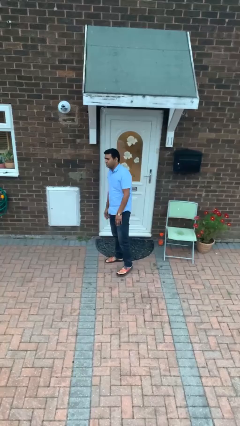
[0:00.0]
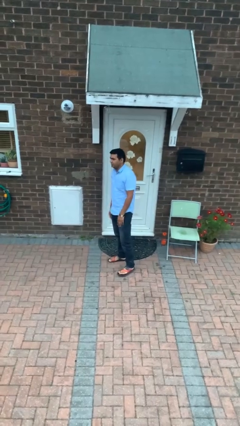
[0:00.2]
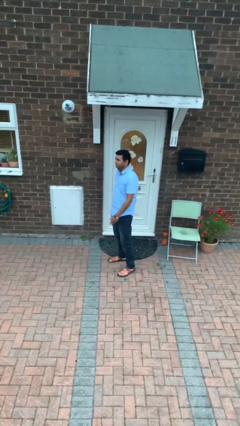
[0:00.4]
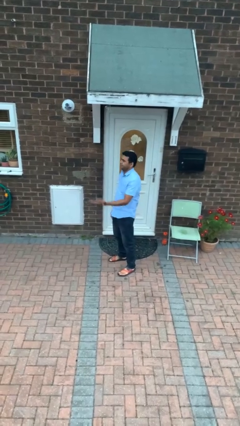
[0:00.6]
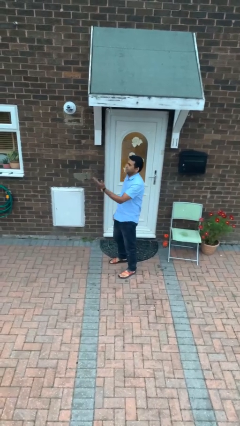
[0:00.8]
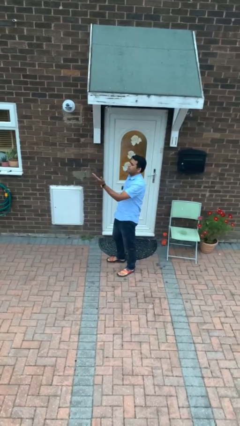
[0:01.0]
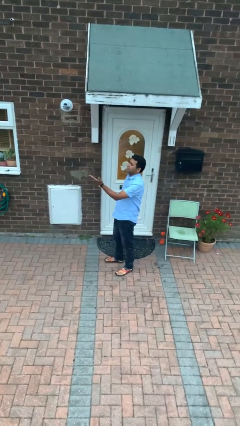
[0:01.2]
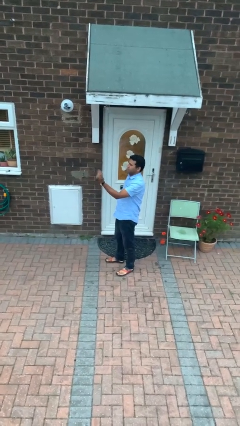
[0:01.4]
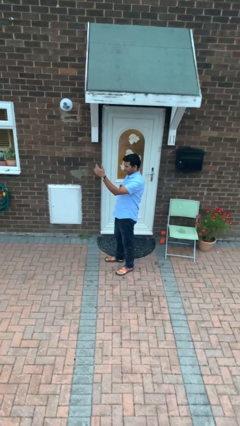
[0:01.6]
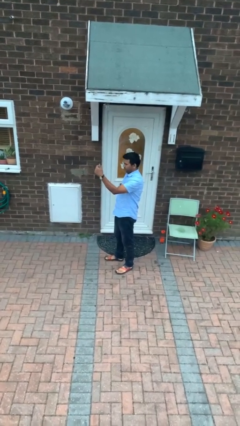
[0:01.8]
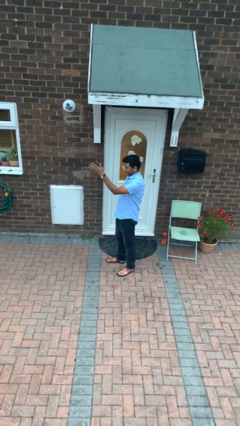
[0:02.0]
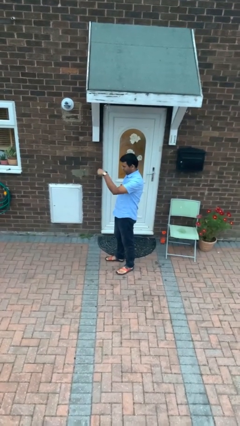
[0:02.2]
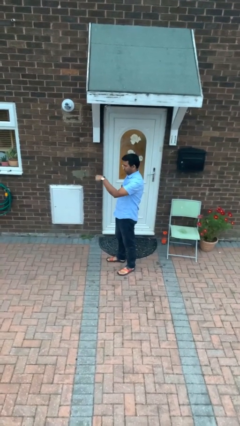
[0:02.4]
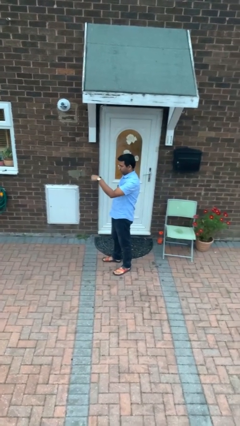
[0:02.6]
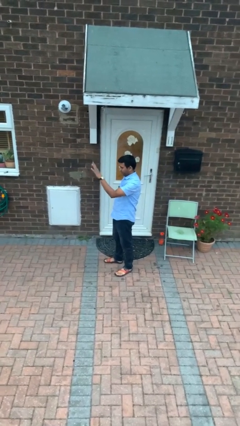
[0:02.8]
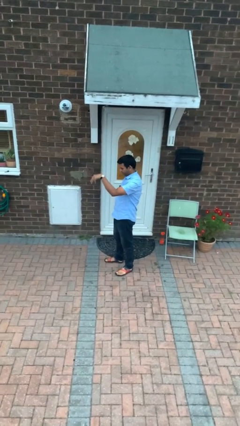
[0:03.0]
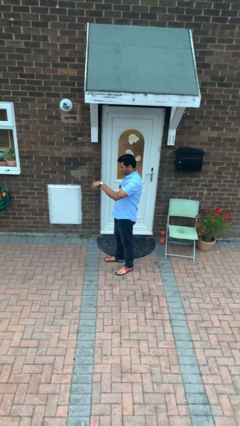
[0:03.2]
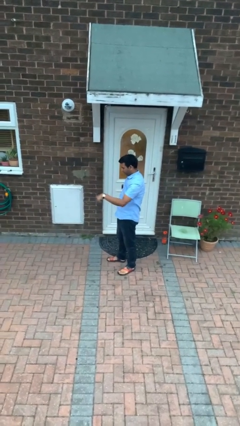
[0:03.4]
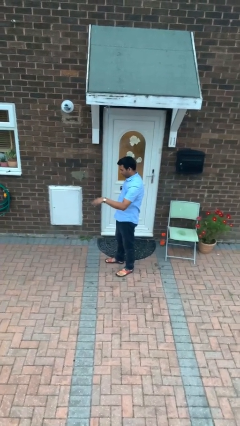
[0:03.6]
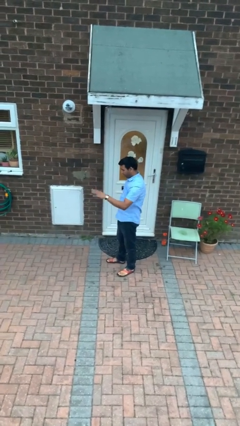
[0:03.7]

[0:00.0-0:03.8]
person gestures come here

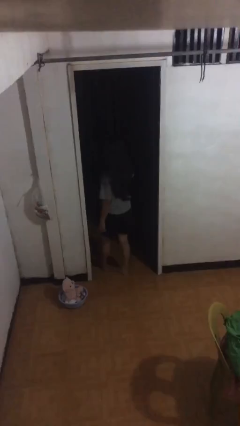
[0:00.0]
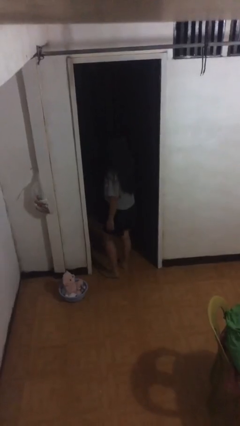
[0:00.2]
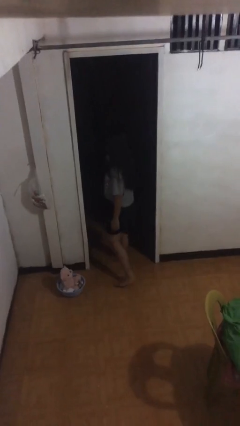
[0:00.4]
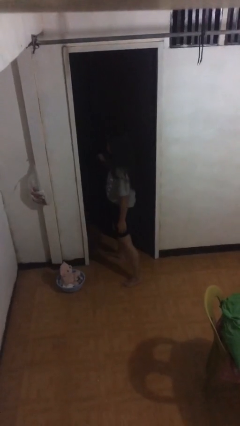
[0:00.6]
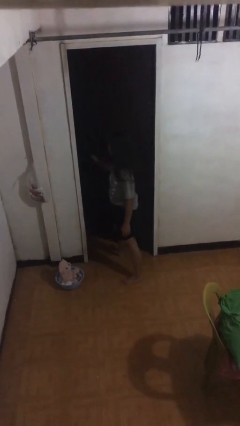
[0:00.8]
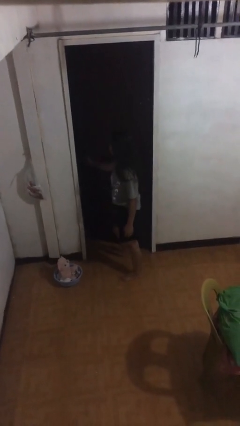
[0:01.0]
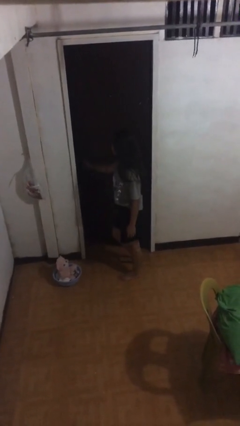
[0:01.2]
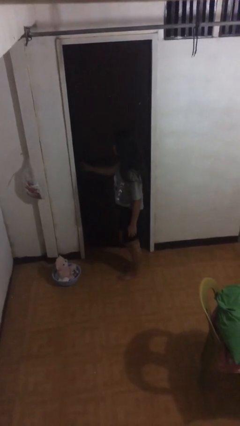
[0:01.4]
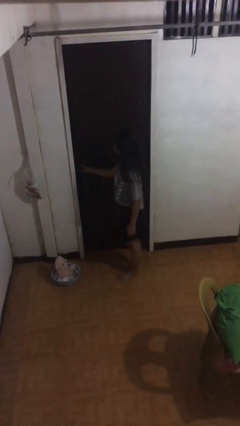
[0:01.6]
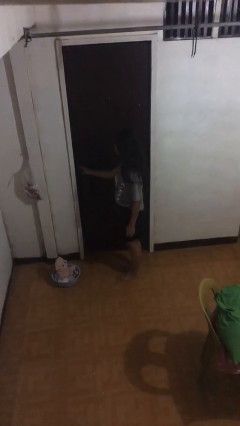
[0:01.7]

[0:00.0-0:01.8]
person closes facility door

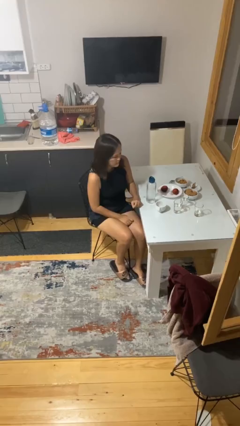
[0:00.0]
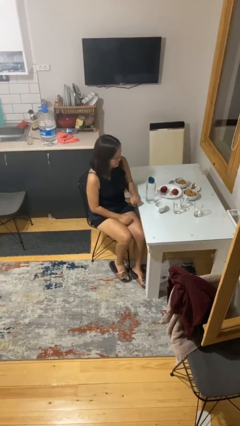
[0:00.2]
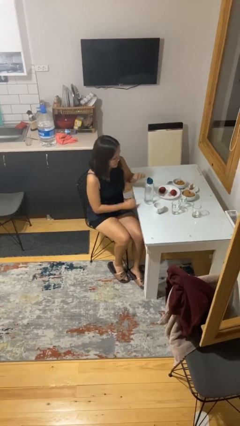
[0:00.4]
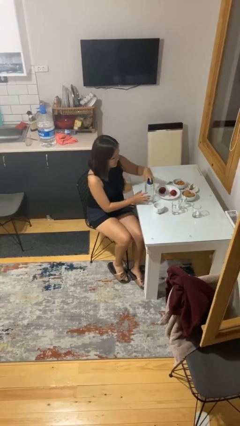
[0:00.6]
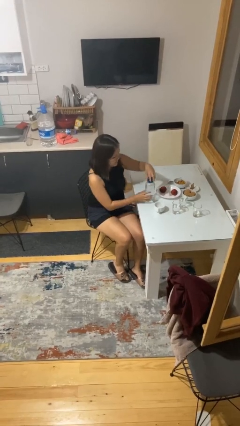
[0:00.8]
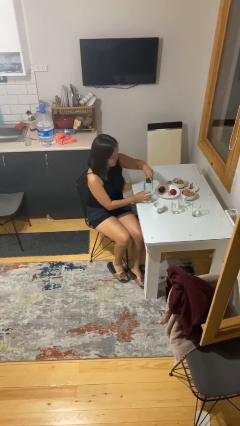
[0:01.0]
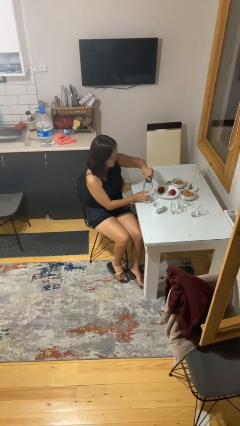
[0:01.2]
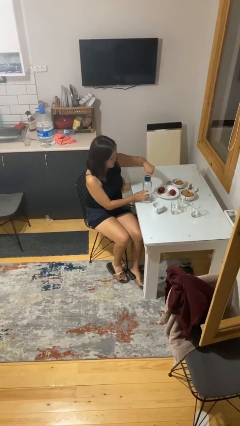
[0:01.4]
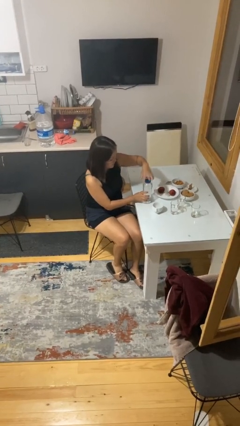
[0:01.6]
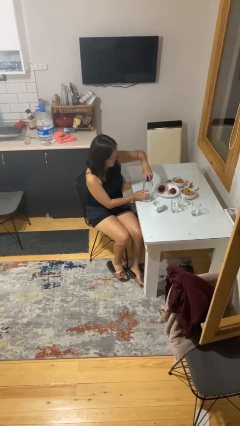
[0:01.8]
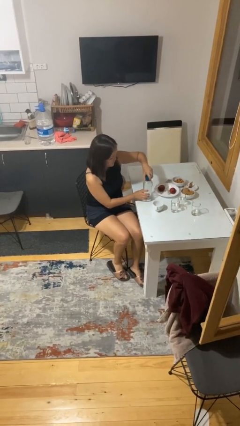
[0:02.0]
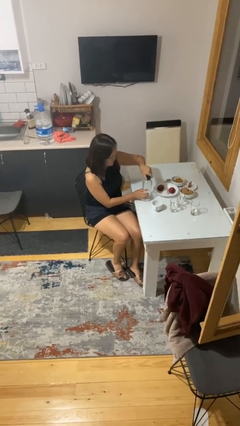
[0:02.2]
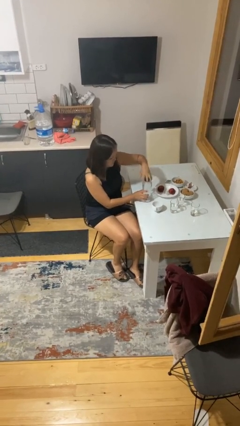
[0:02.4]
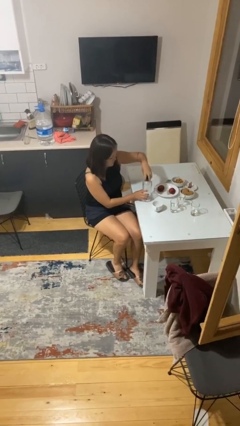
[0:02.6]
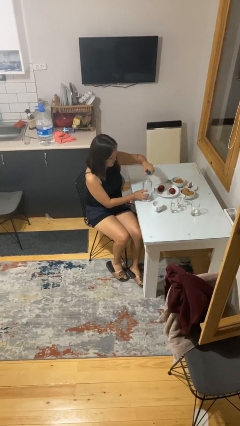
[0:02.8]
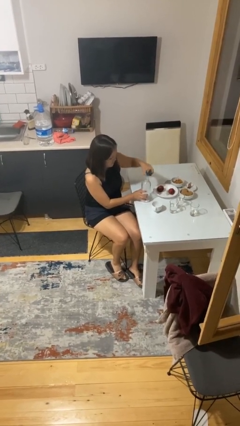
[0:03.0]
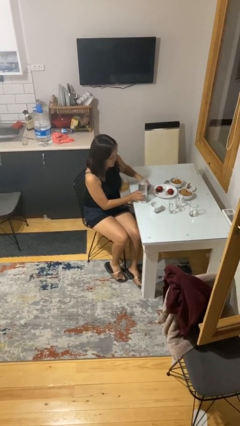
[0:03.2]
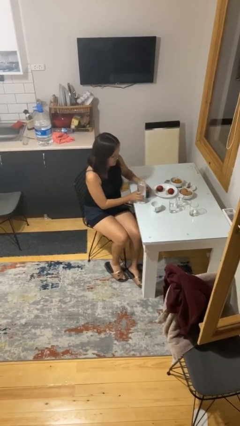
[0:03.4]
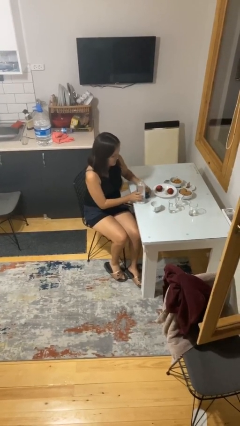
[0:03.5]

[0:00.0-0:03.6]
person unscrews lid from bottle

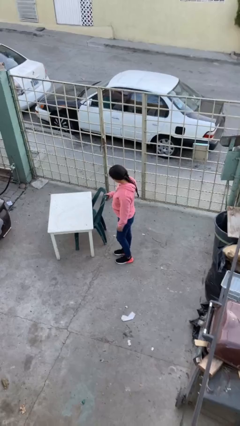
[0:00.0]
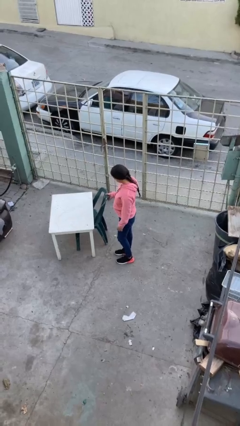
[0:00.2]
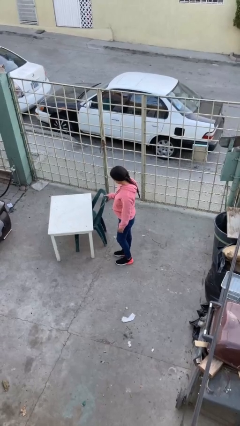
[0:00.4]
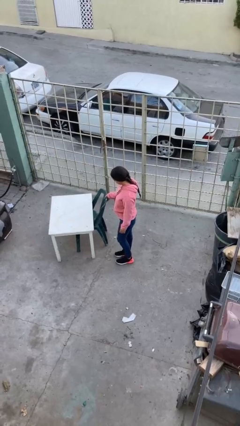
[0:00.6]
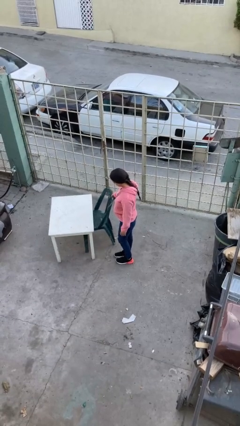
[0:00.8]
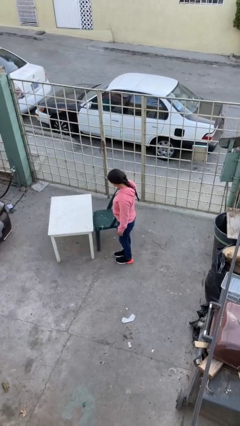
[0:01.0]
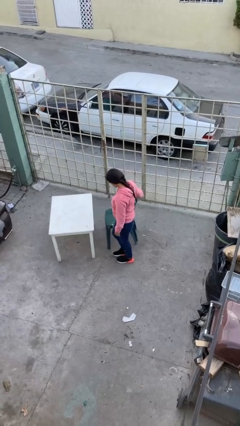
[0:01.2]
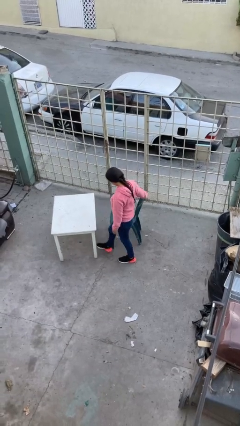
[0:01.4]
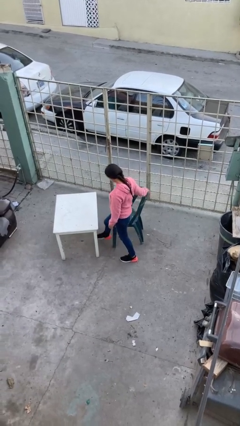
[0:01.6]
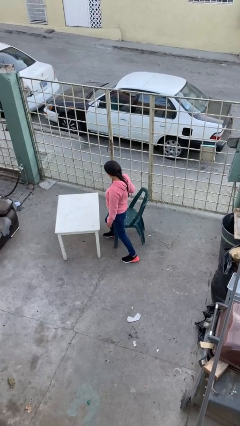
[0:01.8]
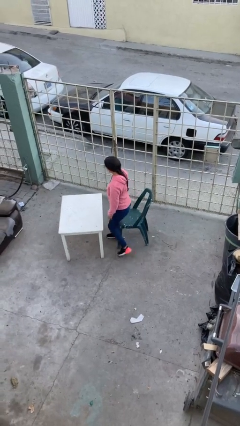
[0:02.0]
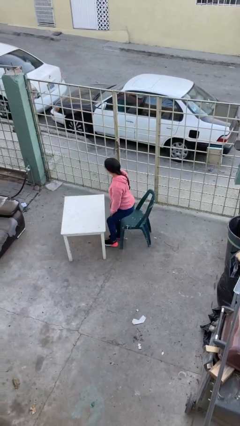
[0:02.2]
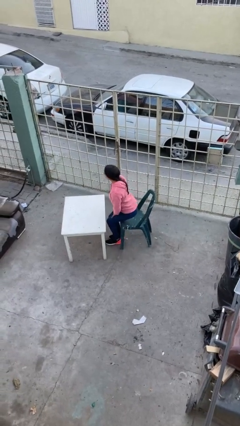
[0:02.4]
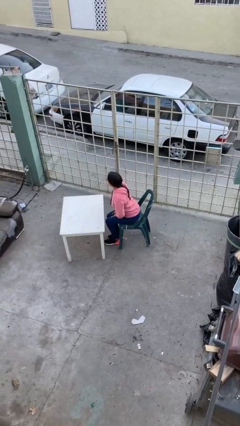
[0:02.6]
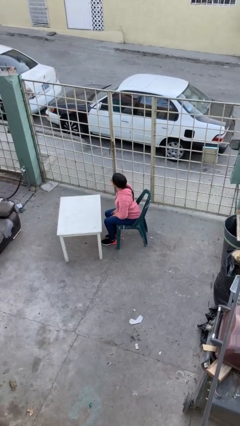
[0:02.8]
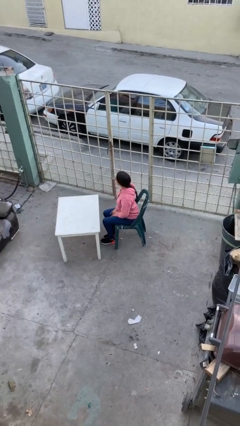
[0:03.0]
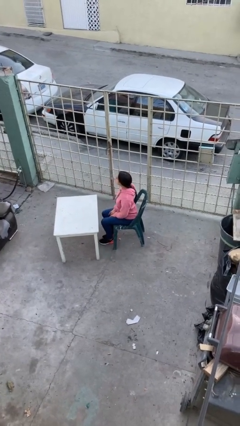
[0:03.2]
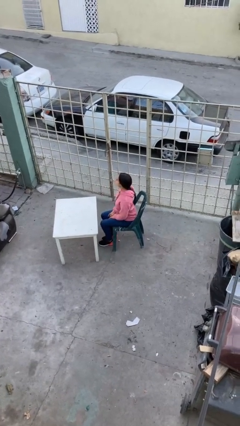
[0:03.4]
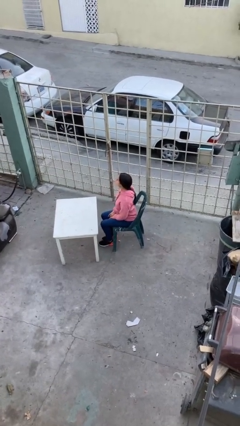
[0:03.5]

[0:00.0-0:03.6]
person sits down

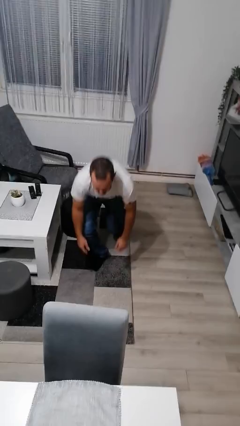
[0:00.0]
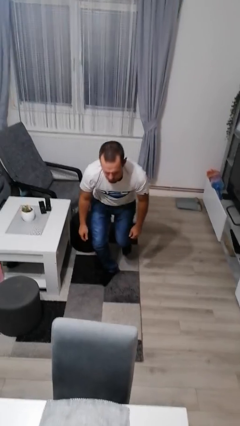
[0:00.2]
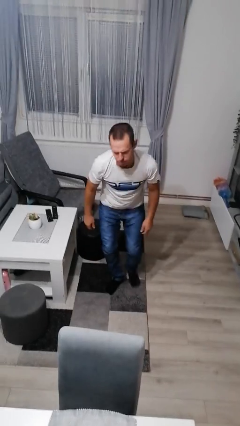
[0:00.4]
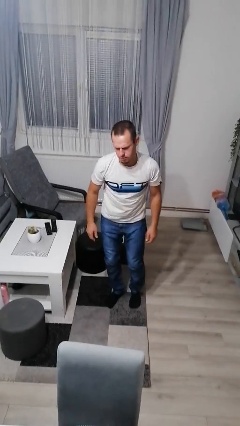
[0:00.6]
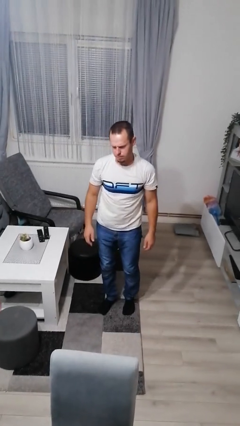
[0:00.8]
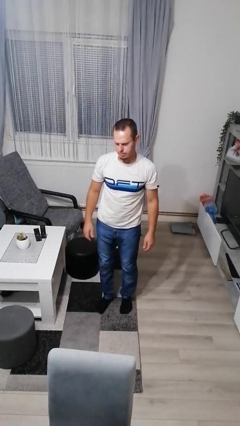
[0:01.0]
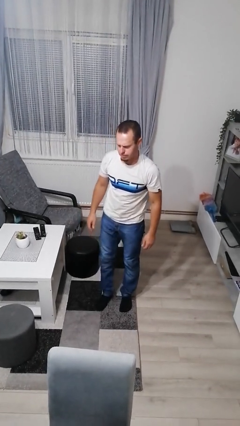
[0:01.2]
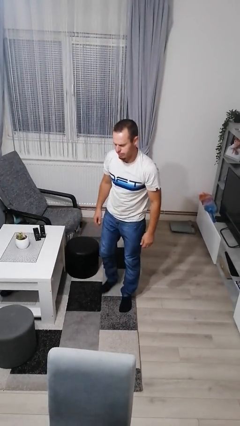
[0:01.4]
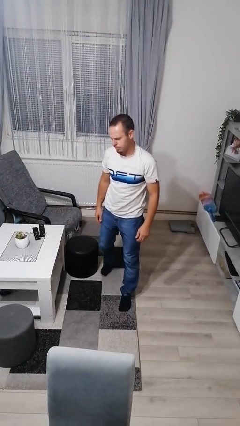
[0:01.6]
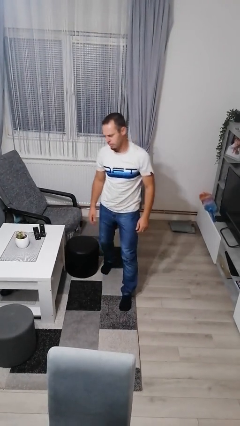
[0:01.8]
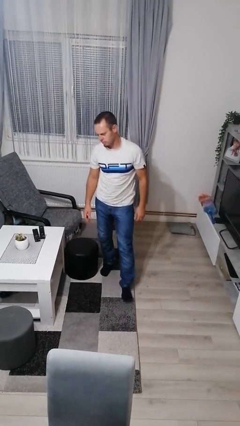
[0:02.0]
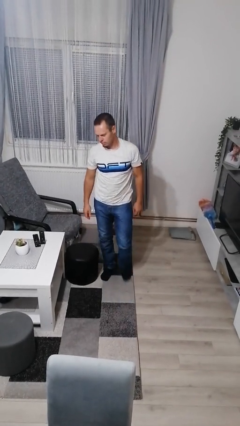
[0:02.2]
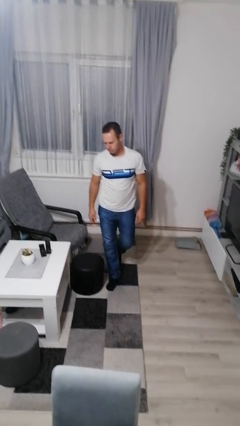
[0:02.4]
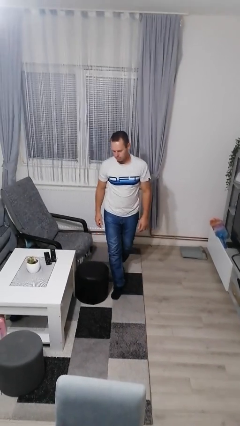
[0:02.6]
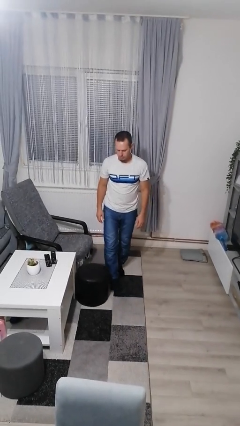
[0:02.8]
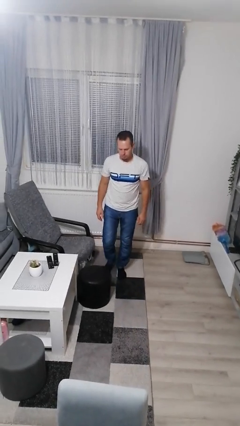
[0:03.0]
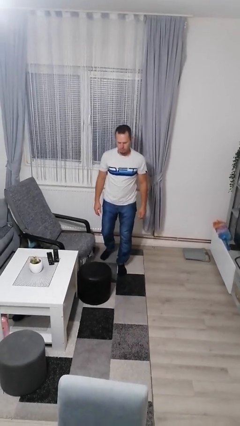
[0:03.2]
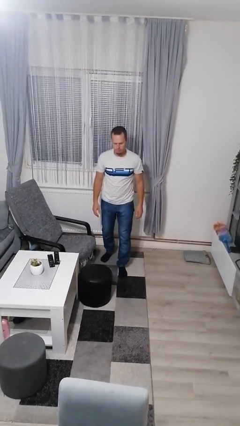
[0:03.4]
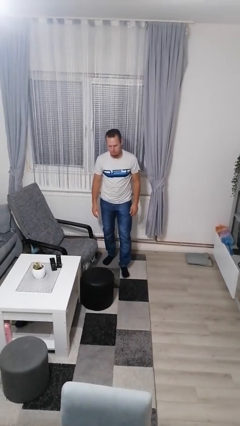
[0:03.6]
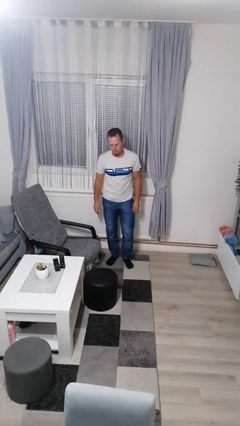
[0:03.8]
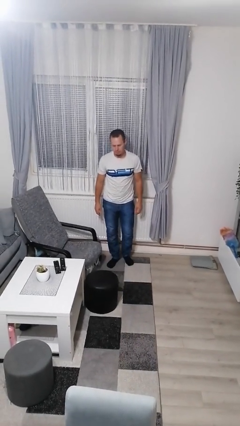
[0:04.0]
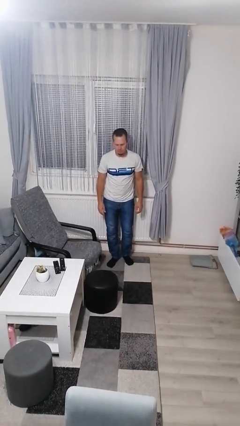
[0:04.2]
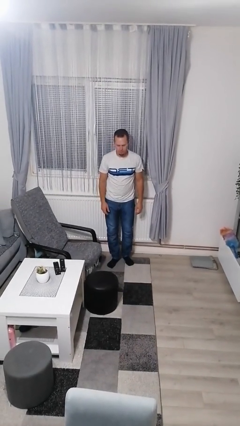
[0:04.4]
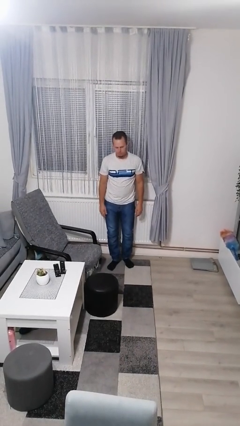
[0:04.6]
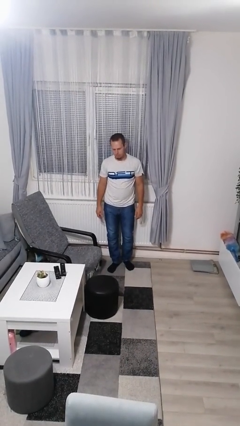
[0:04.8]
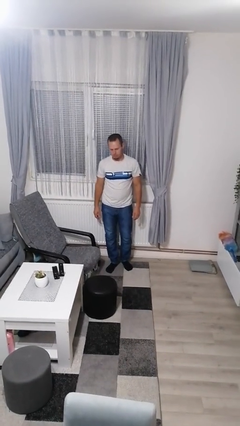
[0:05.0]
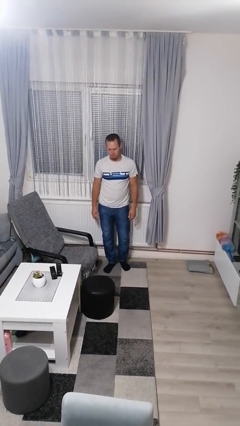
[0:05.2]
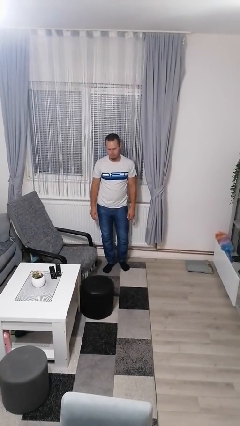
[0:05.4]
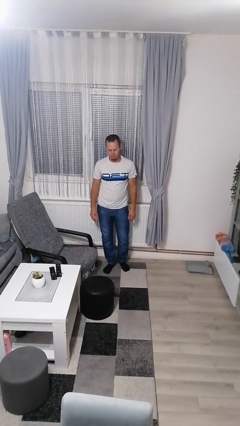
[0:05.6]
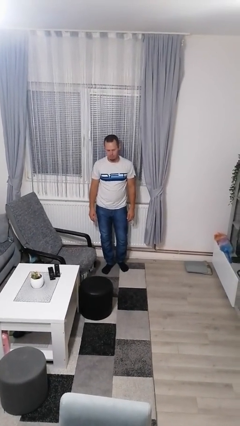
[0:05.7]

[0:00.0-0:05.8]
person stands up from floor
